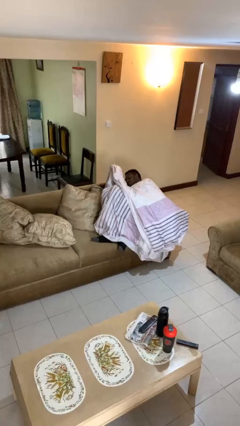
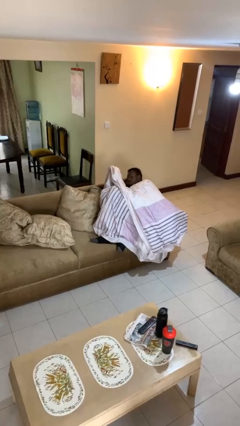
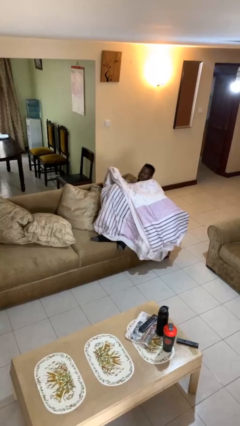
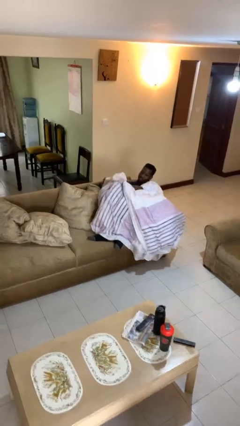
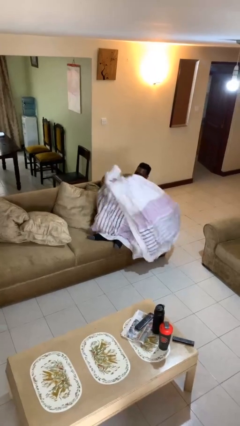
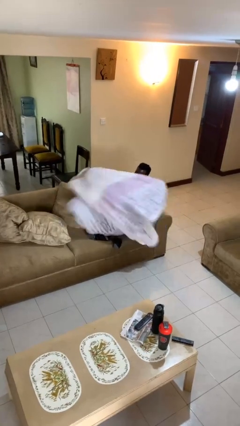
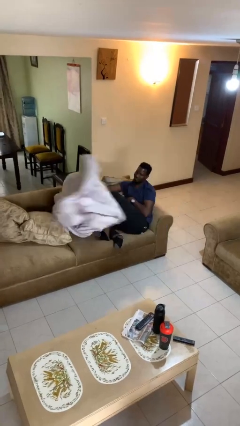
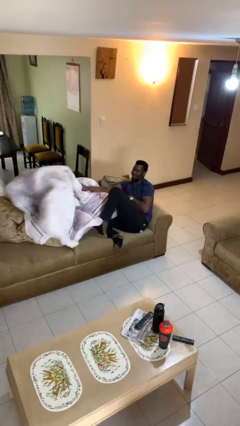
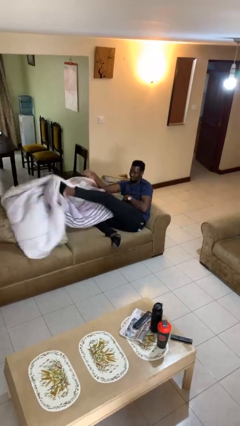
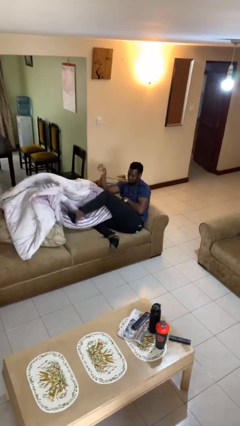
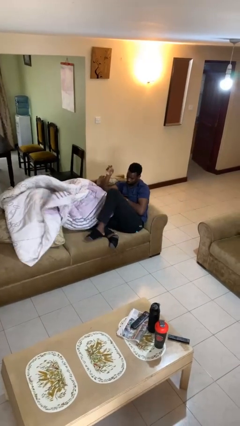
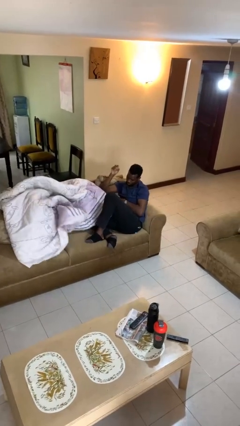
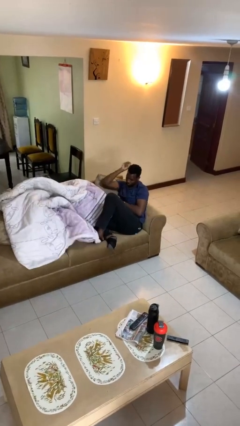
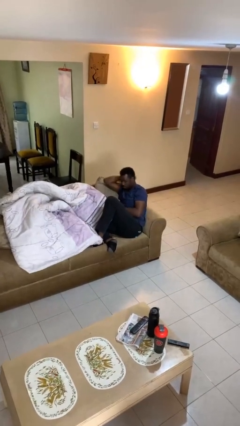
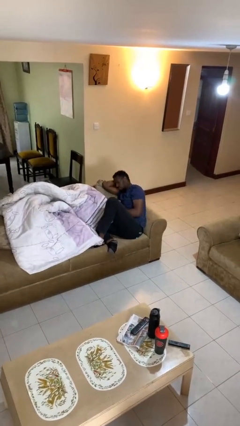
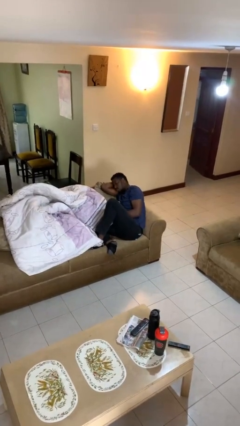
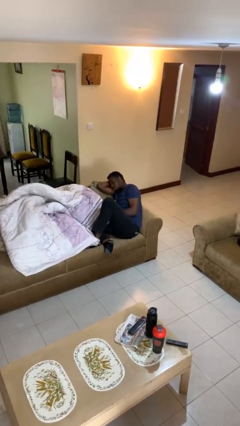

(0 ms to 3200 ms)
person uncovers with blanket

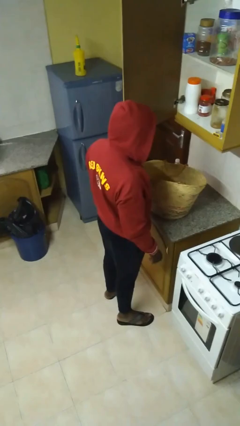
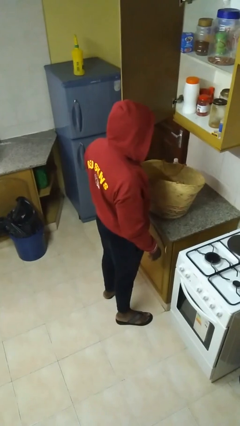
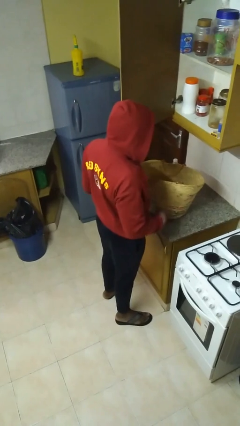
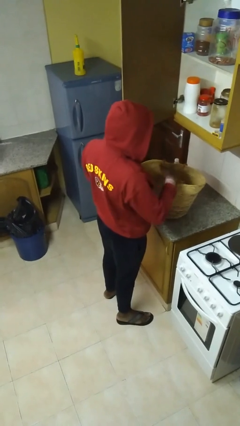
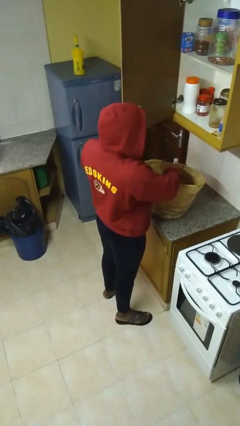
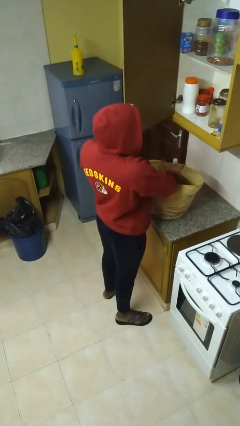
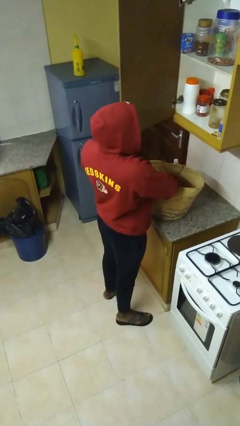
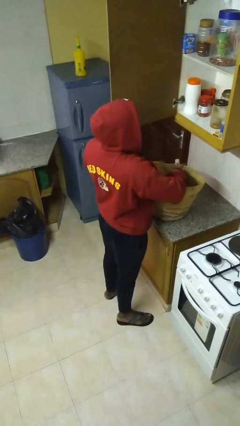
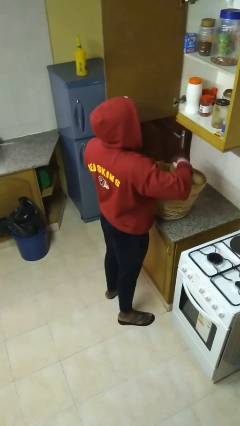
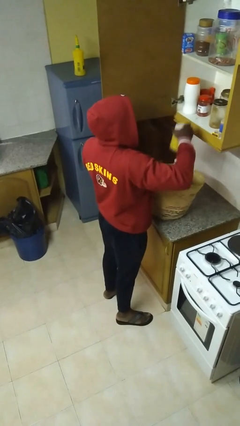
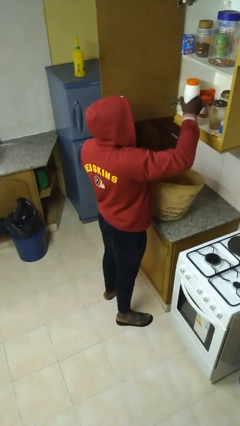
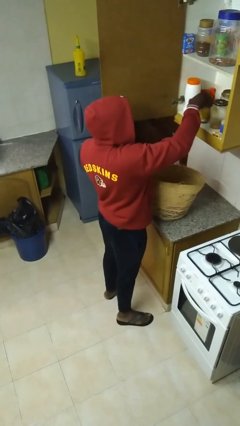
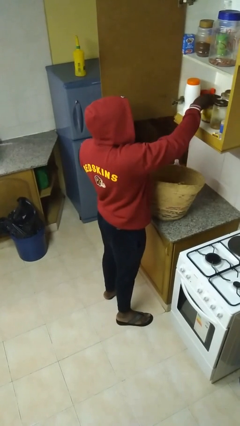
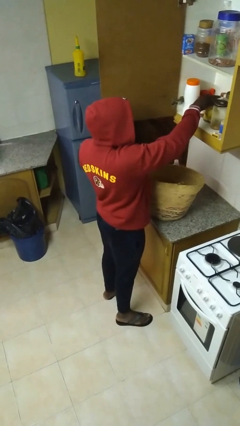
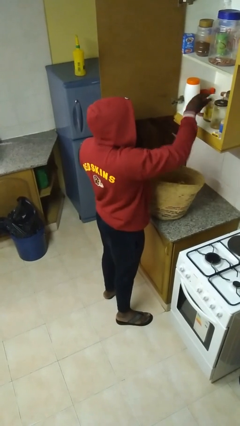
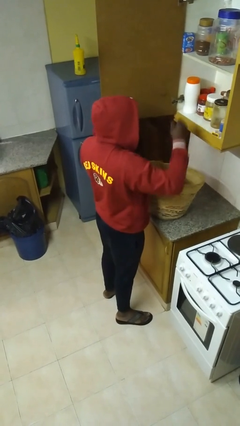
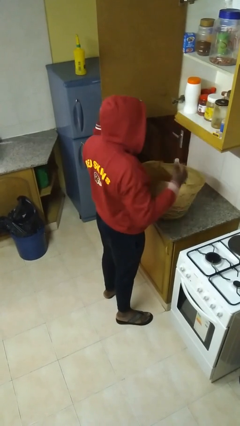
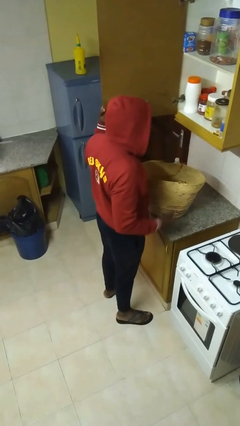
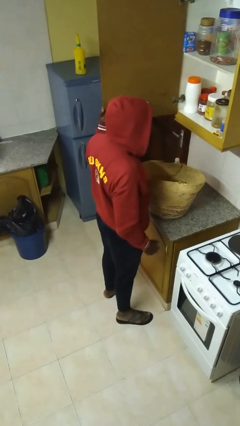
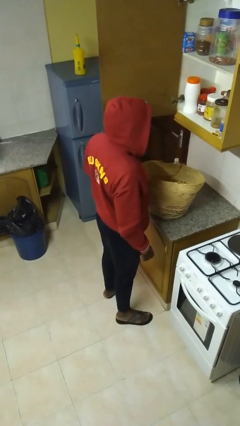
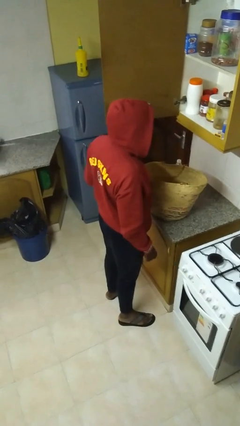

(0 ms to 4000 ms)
person loads groceries into cabinet

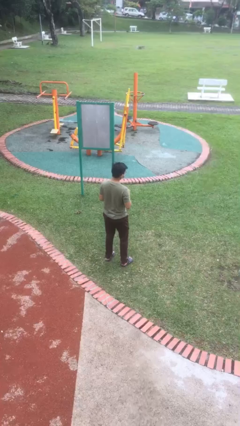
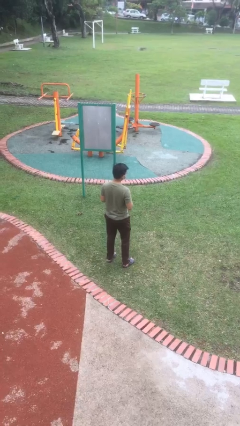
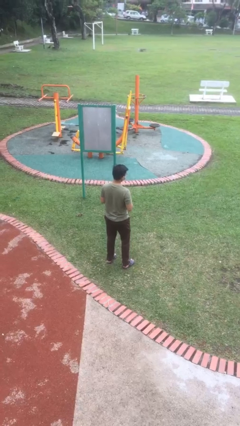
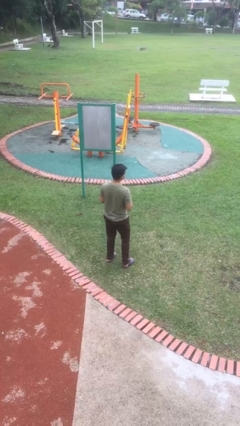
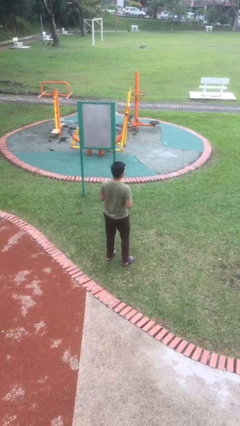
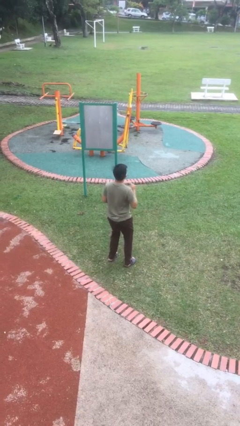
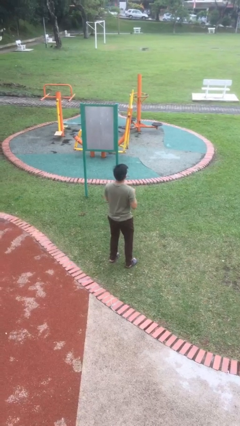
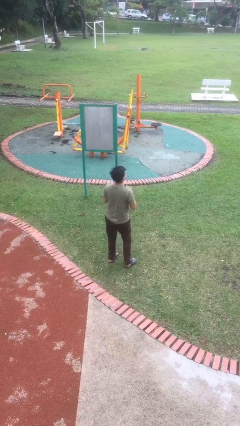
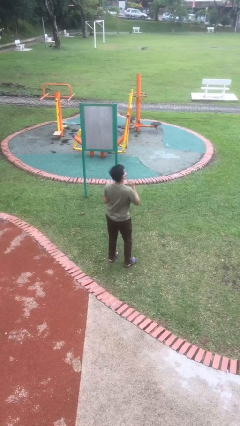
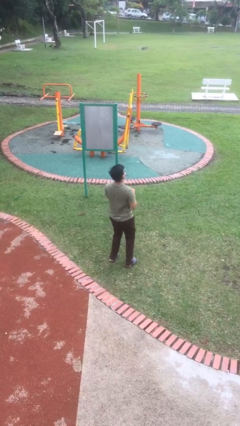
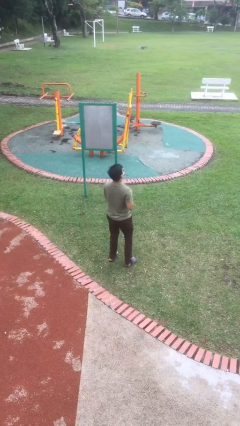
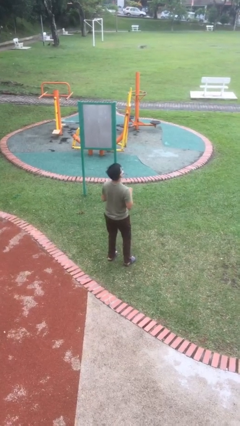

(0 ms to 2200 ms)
person wiggles hips

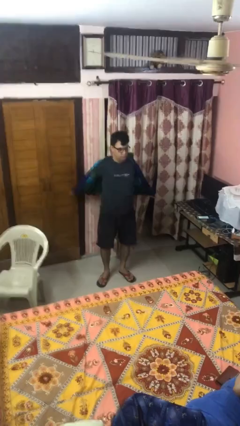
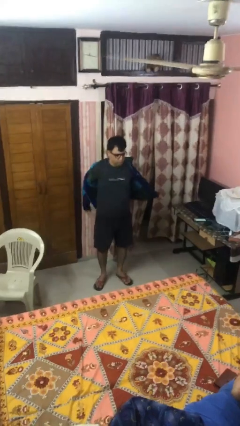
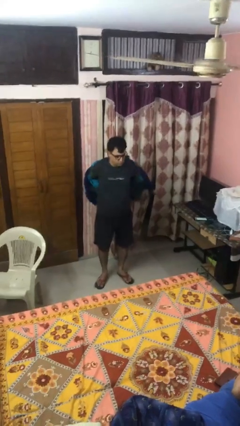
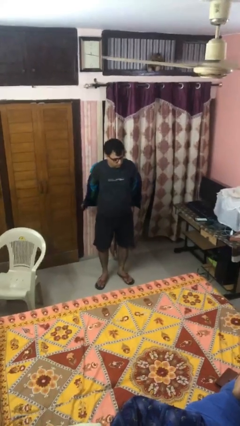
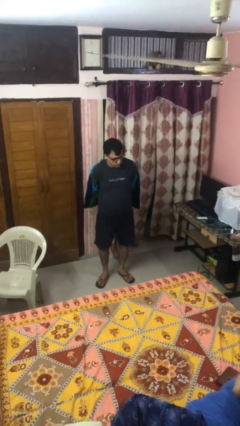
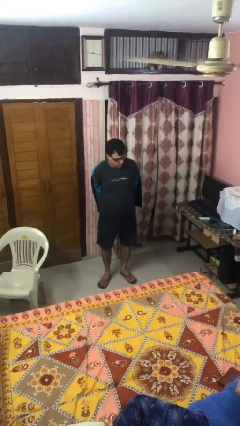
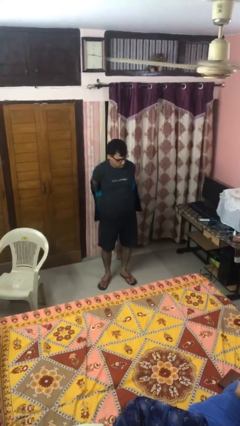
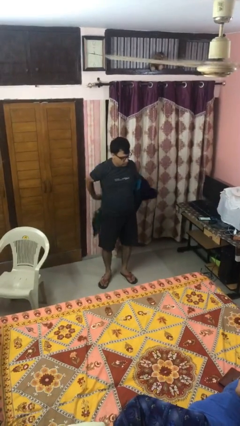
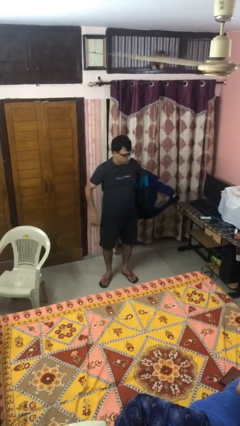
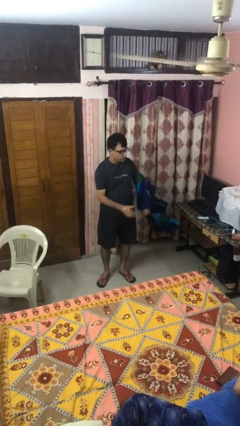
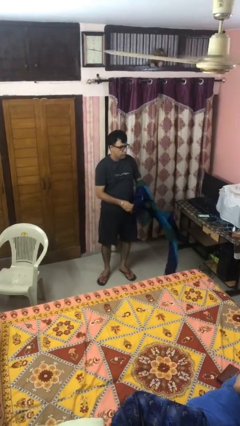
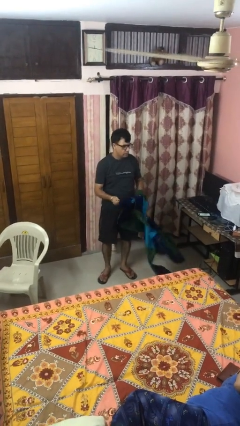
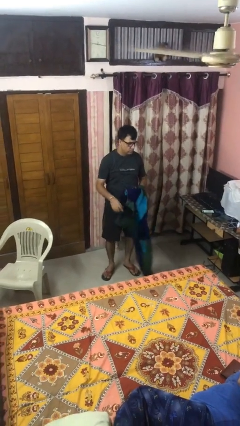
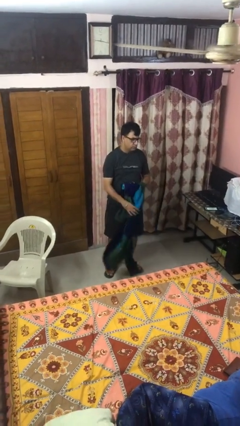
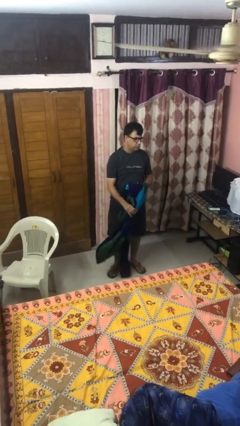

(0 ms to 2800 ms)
person takes off jacket

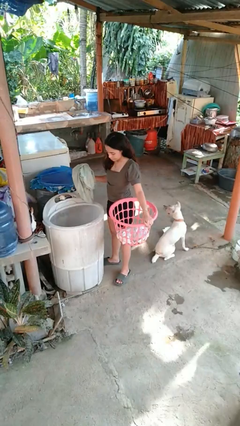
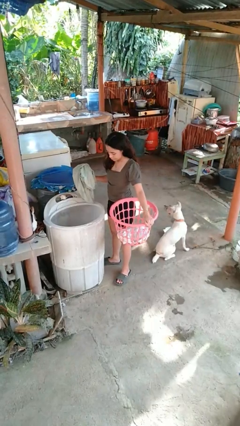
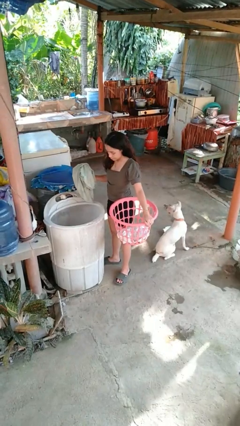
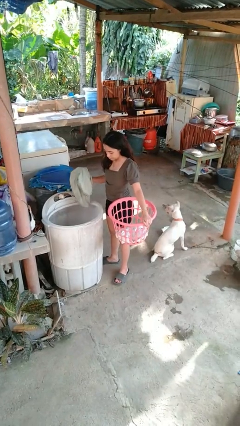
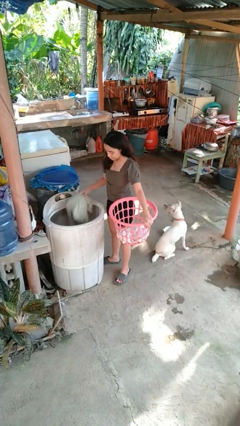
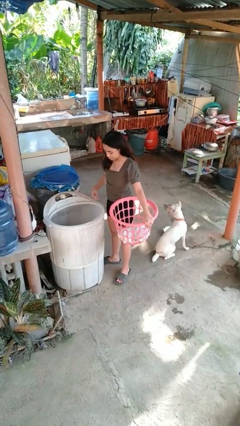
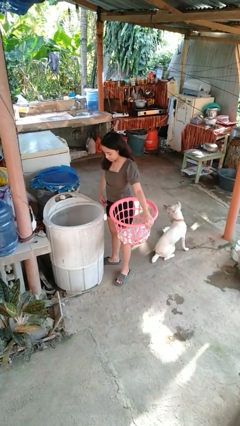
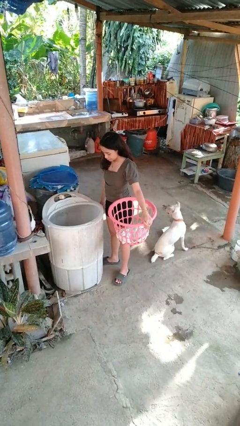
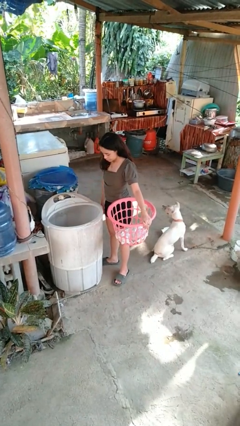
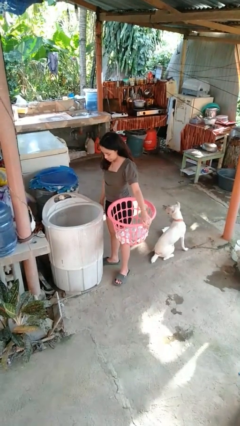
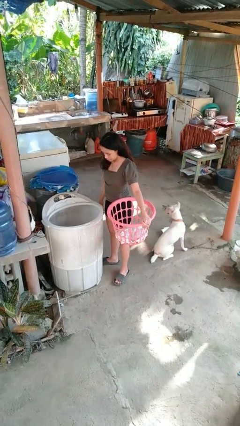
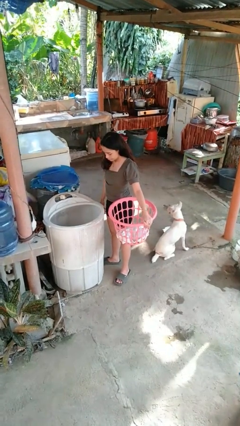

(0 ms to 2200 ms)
person loads dryer

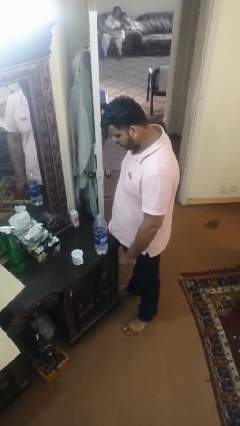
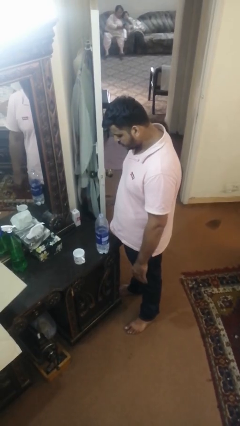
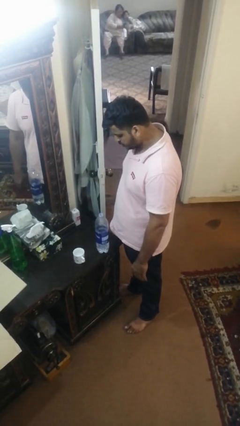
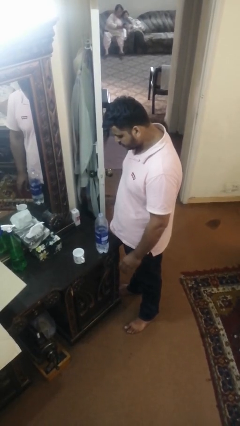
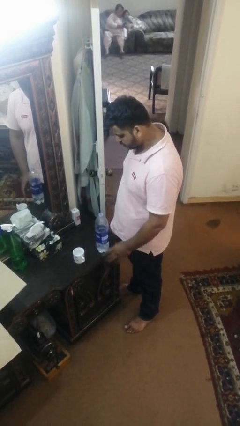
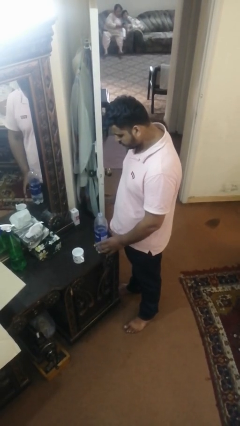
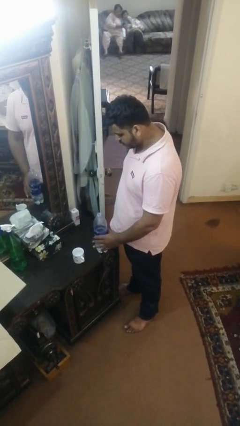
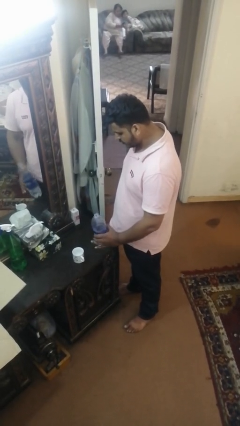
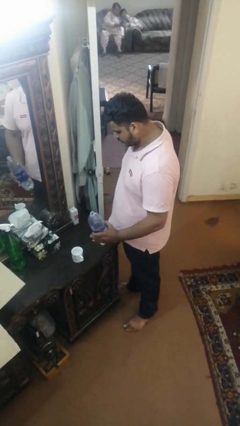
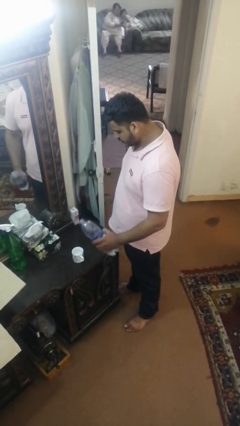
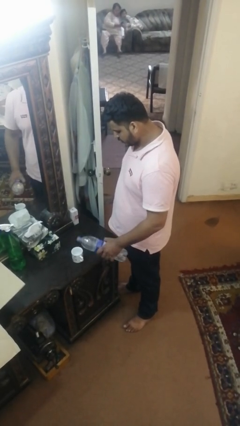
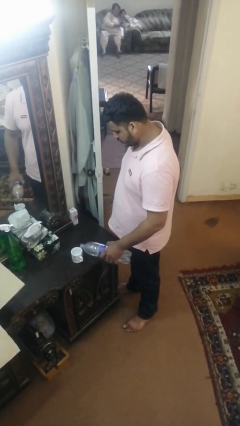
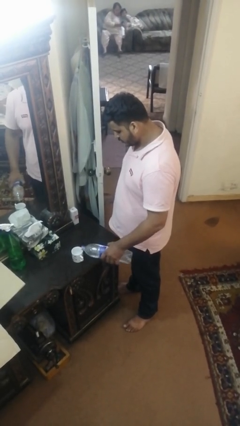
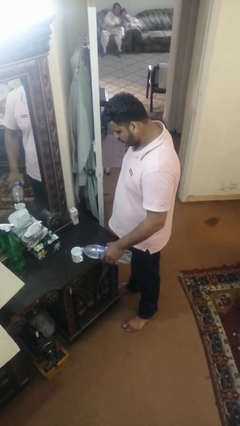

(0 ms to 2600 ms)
person pours liquid into cup

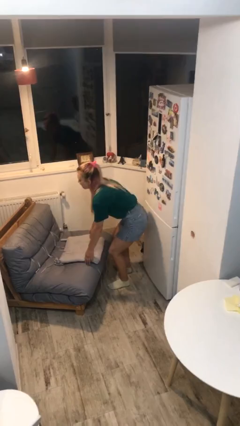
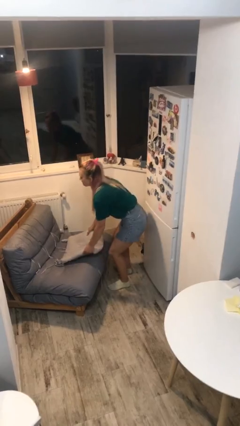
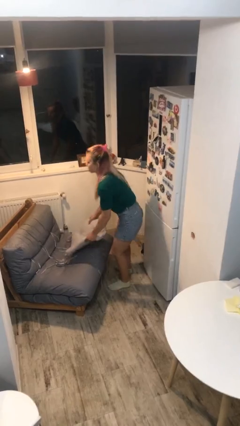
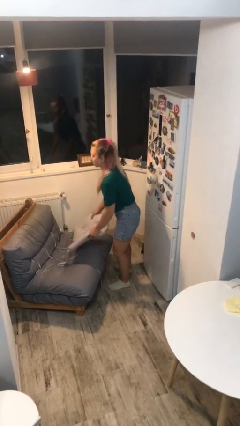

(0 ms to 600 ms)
person picks up object from couch
